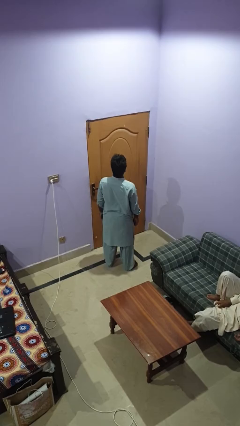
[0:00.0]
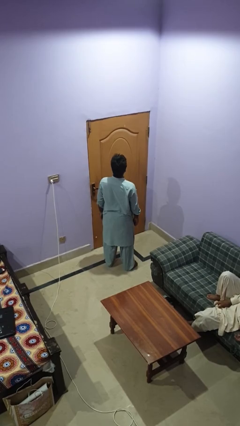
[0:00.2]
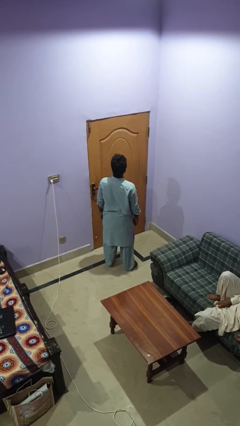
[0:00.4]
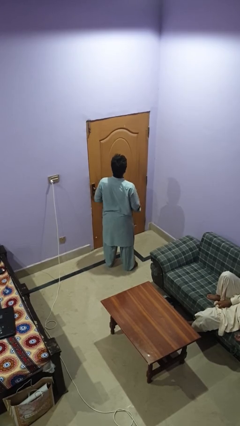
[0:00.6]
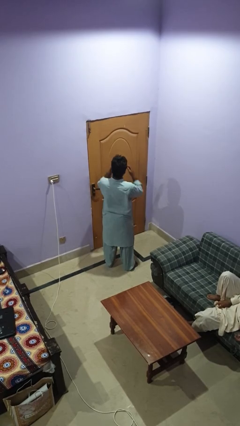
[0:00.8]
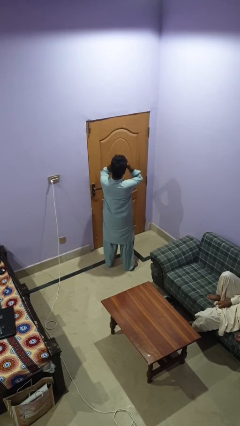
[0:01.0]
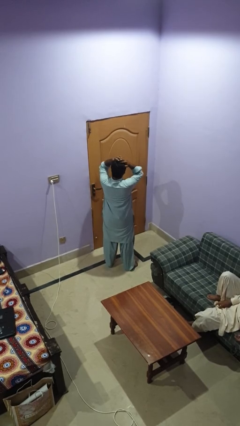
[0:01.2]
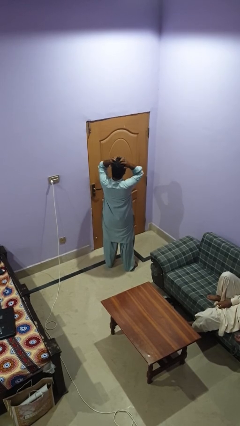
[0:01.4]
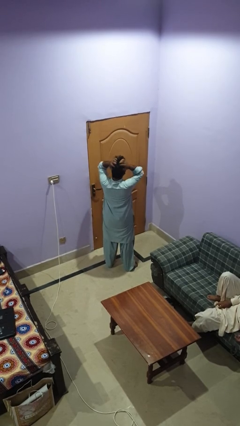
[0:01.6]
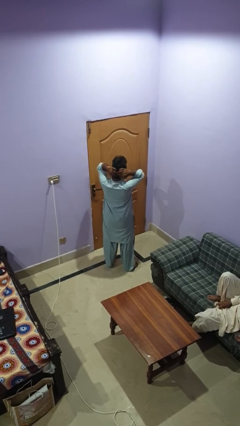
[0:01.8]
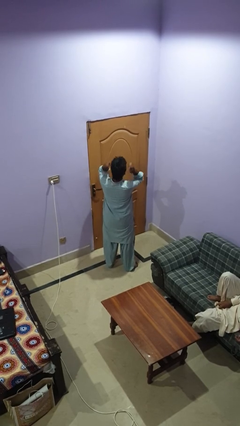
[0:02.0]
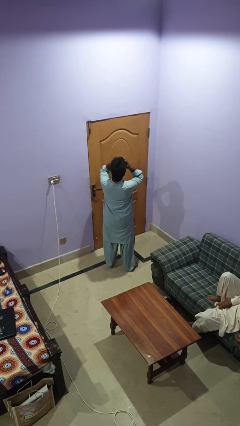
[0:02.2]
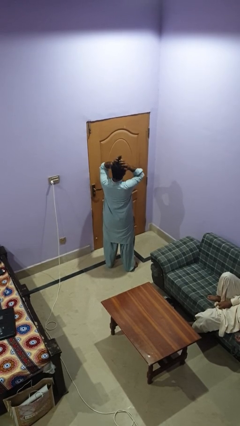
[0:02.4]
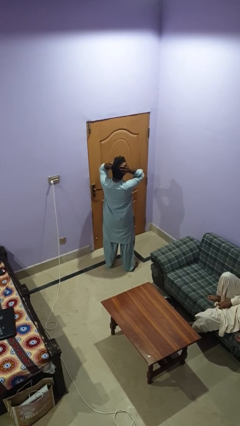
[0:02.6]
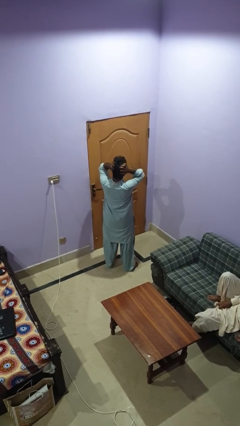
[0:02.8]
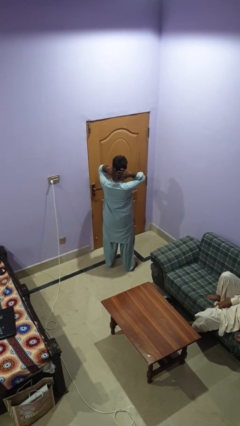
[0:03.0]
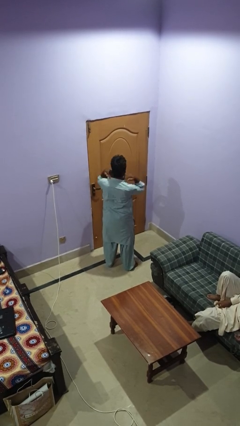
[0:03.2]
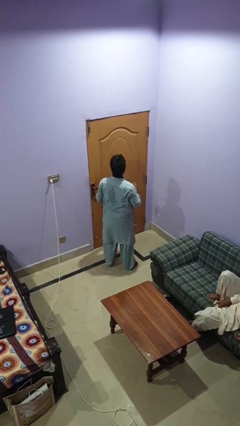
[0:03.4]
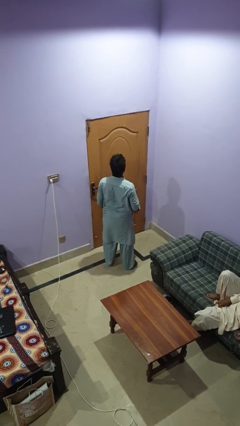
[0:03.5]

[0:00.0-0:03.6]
person strokes hair

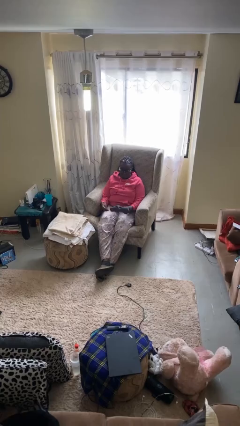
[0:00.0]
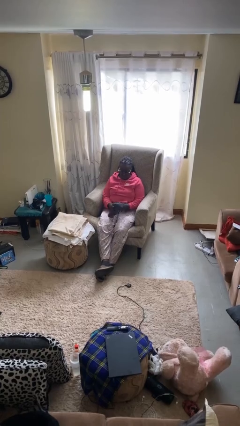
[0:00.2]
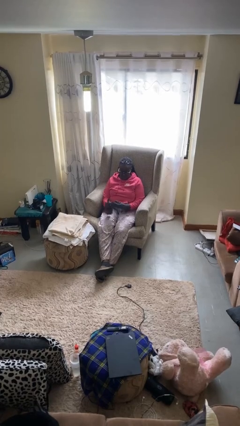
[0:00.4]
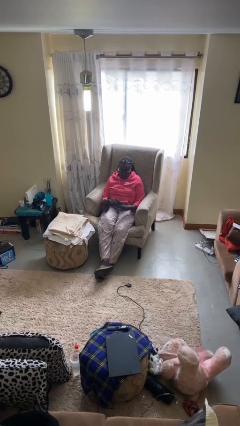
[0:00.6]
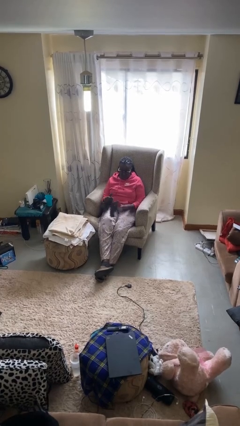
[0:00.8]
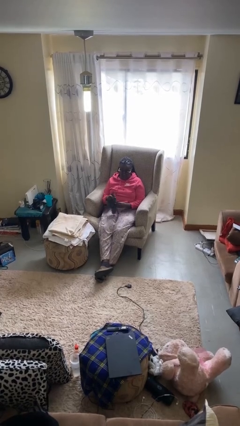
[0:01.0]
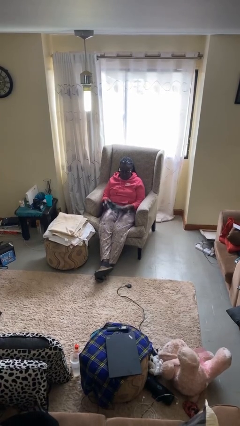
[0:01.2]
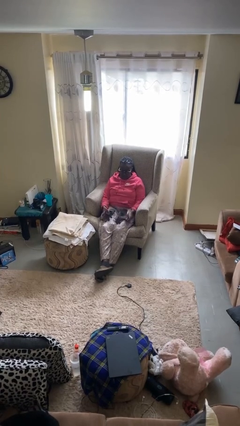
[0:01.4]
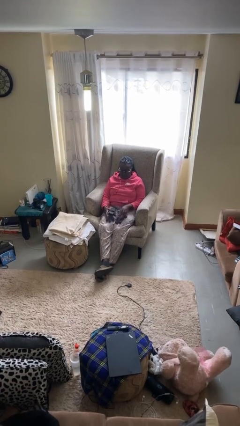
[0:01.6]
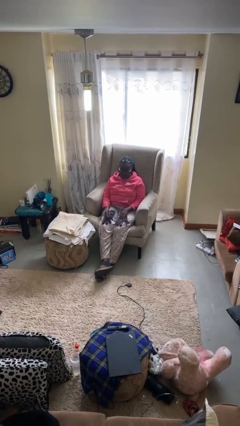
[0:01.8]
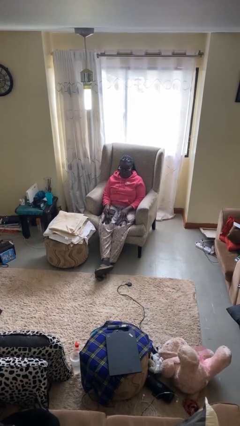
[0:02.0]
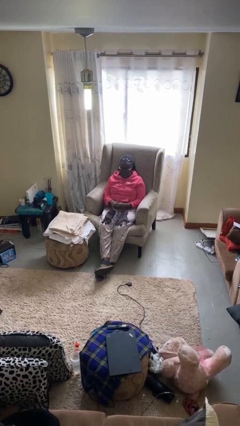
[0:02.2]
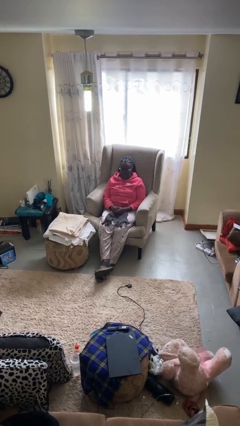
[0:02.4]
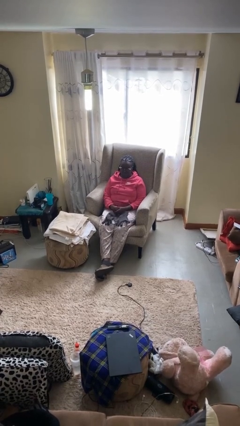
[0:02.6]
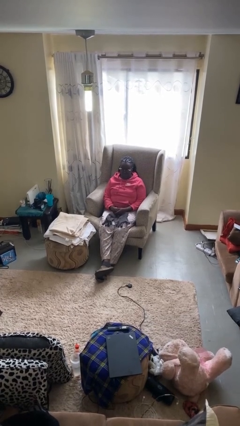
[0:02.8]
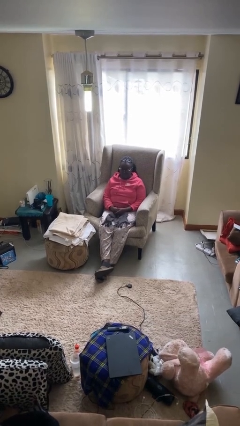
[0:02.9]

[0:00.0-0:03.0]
person takes off gloves

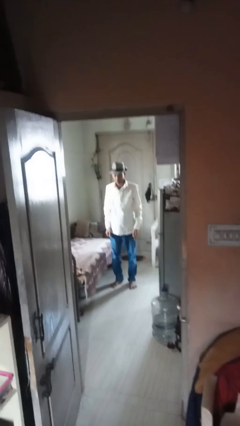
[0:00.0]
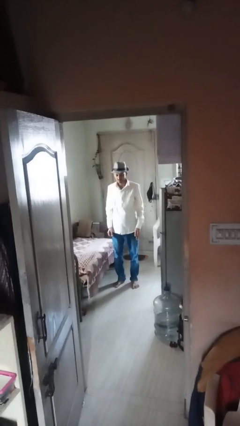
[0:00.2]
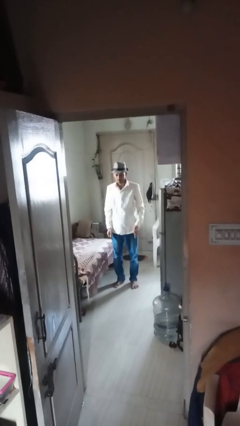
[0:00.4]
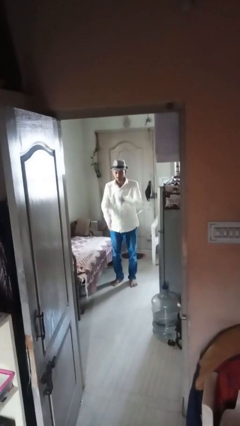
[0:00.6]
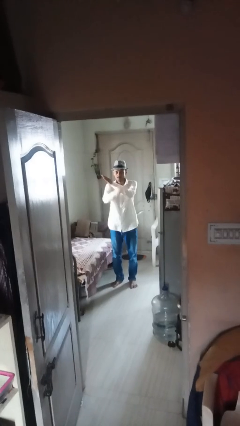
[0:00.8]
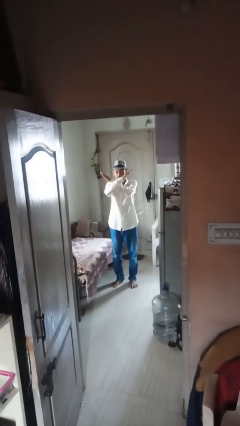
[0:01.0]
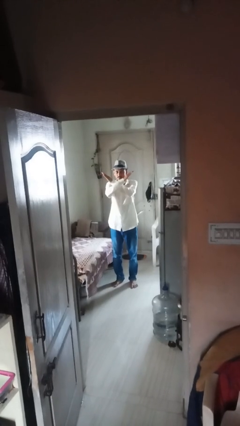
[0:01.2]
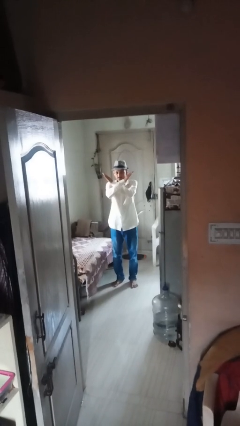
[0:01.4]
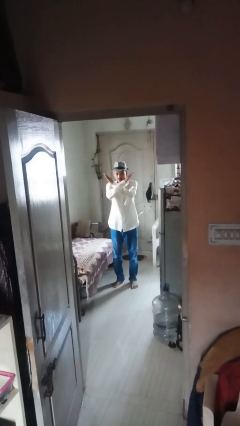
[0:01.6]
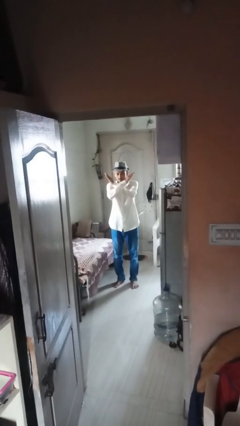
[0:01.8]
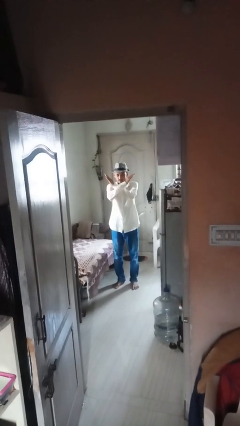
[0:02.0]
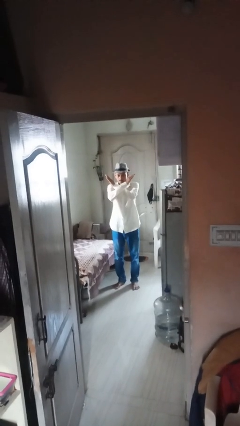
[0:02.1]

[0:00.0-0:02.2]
person gestures arms x

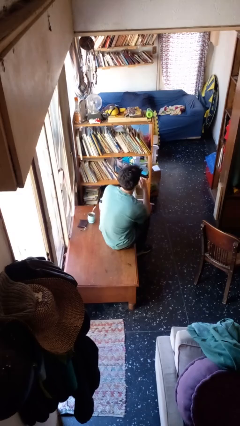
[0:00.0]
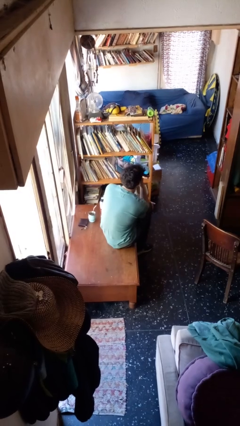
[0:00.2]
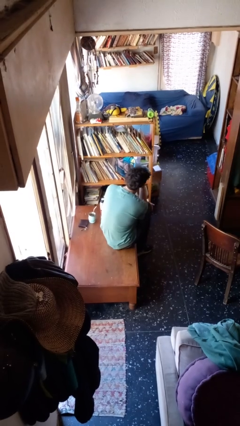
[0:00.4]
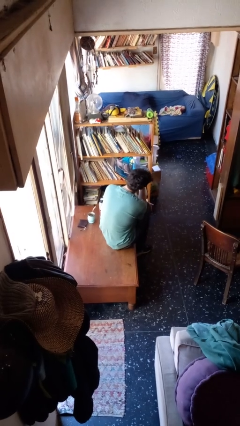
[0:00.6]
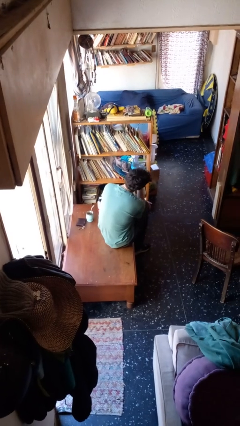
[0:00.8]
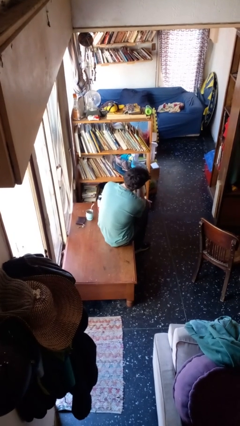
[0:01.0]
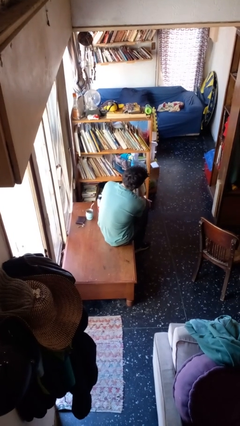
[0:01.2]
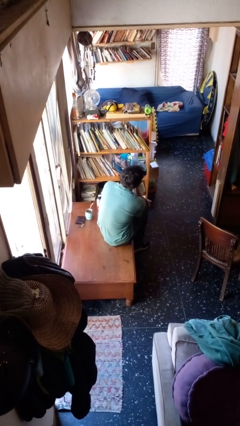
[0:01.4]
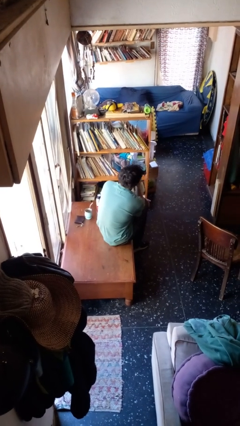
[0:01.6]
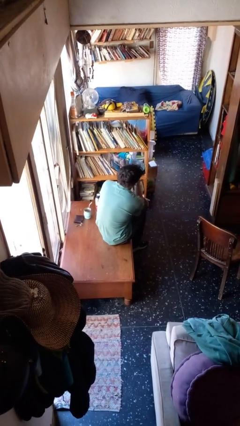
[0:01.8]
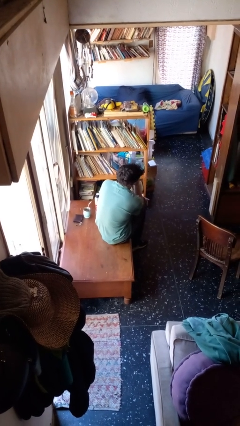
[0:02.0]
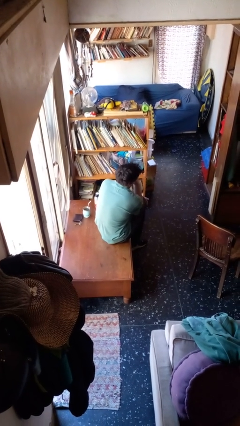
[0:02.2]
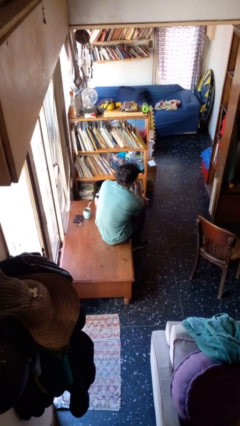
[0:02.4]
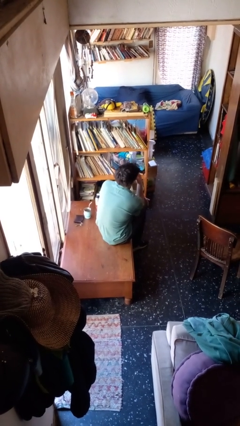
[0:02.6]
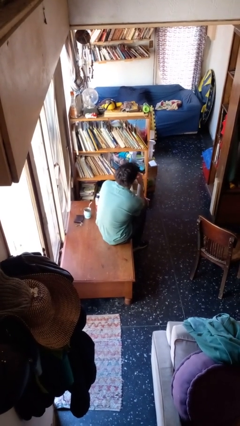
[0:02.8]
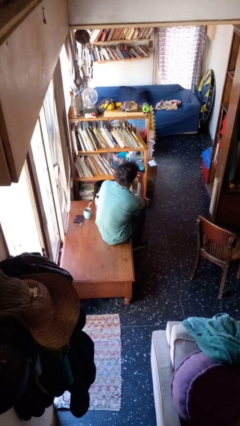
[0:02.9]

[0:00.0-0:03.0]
person strokes chin

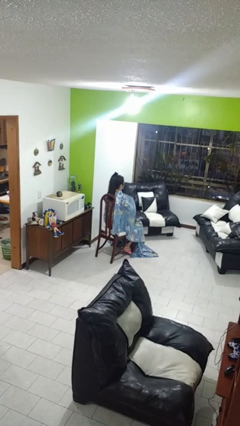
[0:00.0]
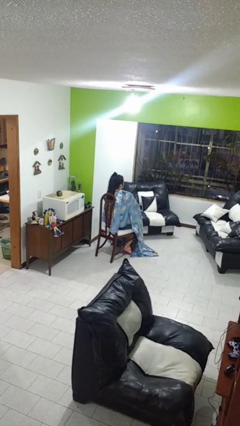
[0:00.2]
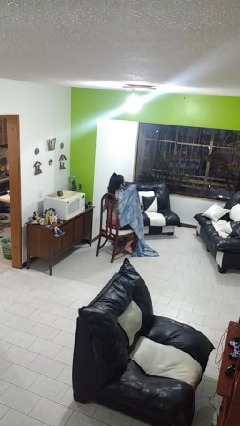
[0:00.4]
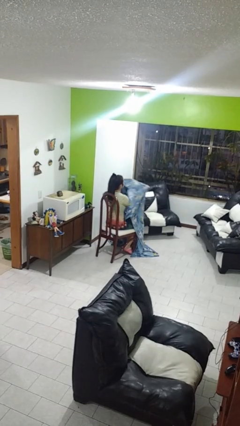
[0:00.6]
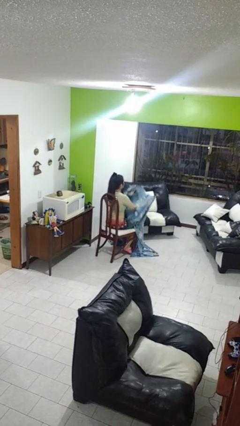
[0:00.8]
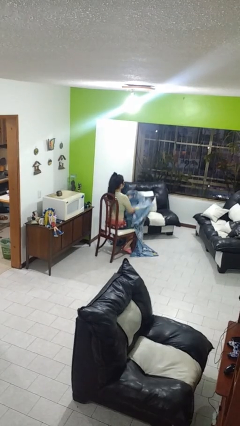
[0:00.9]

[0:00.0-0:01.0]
person uncovers with blanket

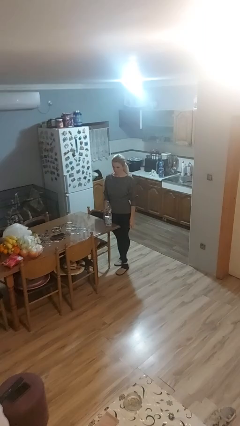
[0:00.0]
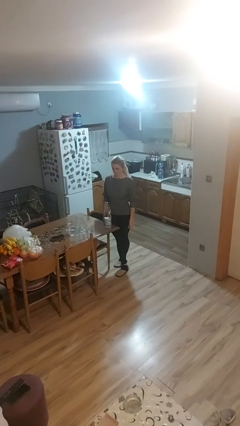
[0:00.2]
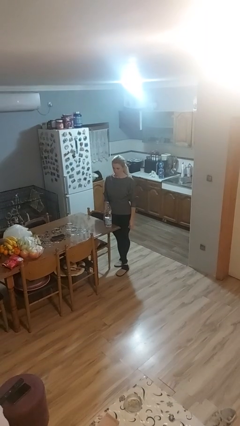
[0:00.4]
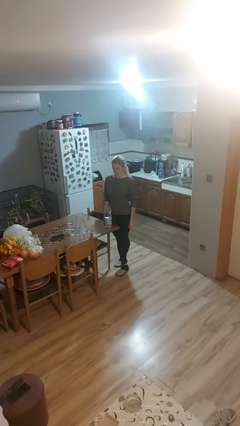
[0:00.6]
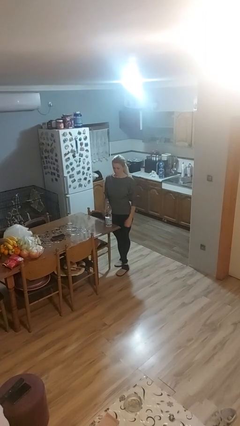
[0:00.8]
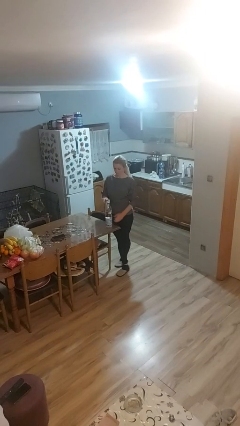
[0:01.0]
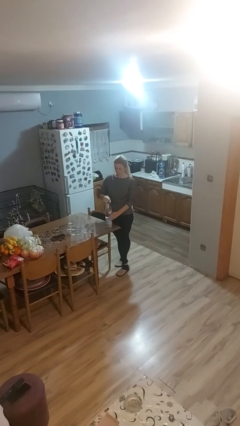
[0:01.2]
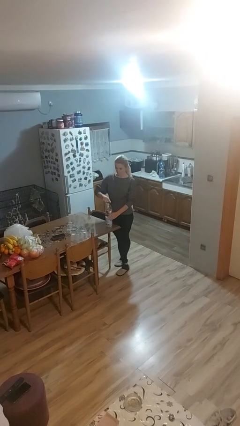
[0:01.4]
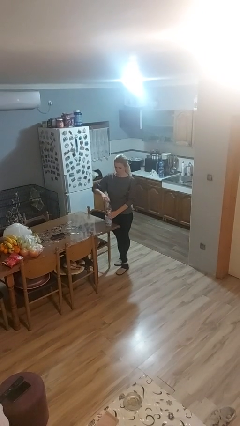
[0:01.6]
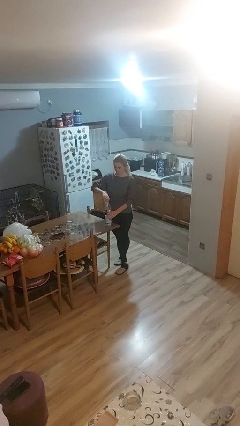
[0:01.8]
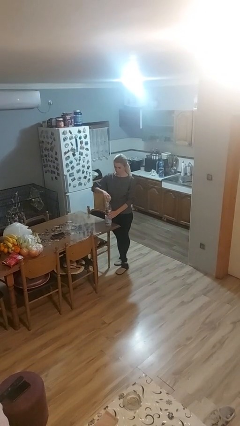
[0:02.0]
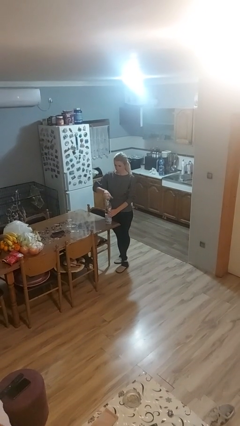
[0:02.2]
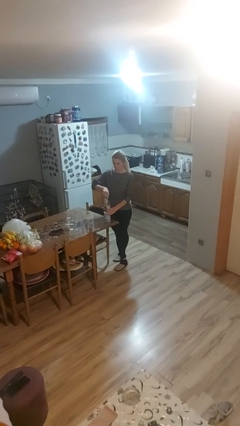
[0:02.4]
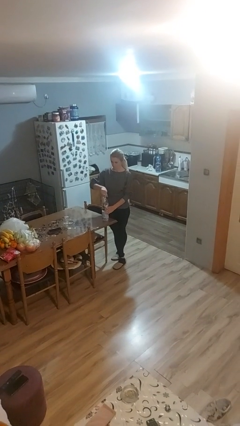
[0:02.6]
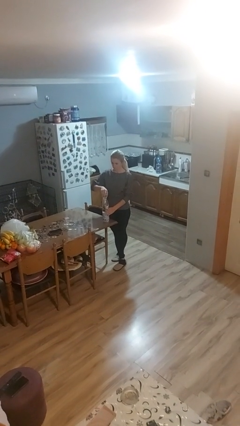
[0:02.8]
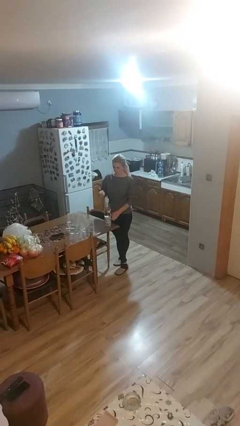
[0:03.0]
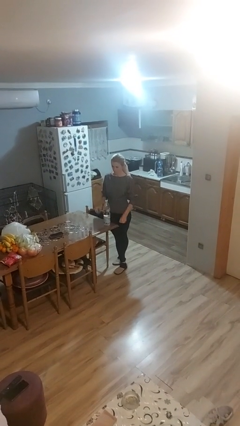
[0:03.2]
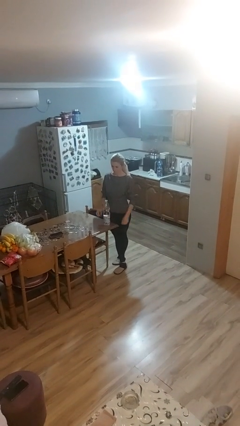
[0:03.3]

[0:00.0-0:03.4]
person unscrews lid from bottle

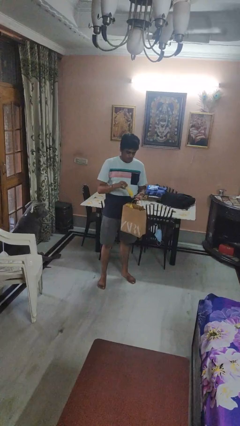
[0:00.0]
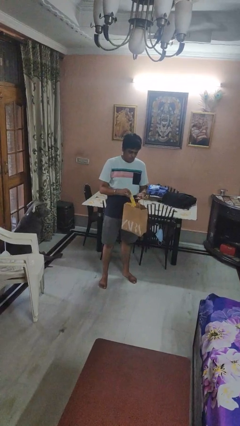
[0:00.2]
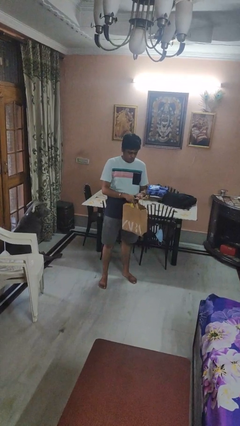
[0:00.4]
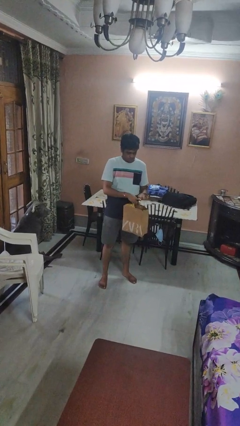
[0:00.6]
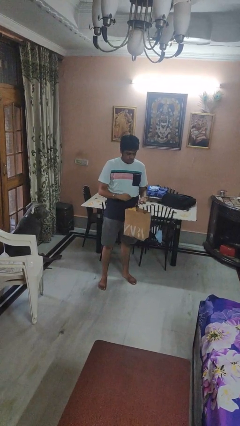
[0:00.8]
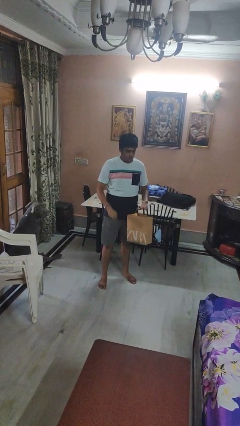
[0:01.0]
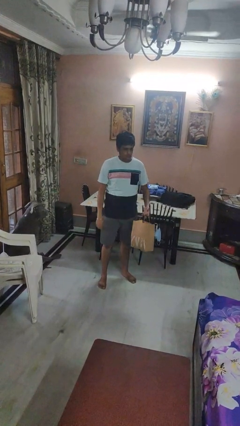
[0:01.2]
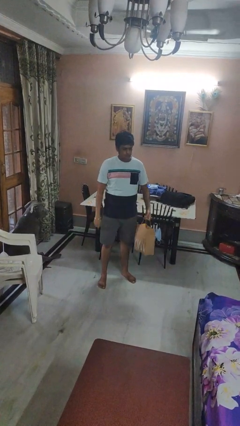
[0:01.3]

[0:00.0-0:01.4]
person puts object into bag
